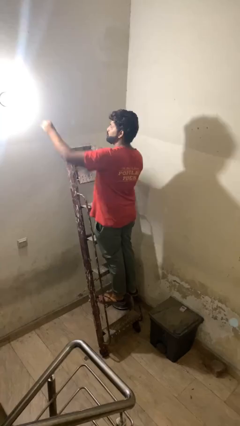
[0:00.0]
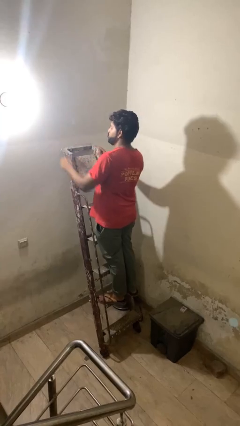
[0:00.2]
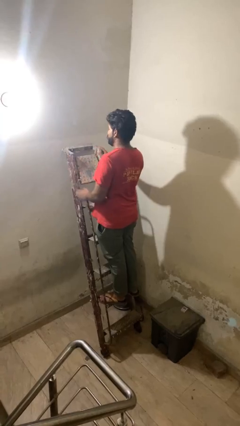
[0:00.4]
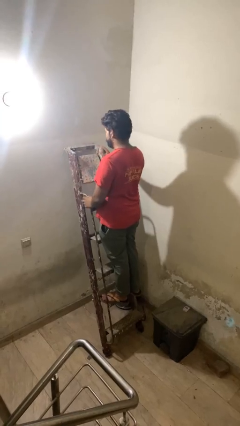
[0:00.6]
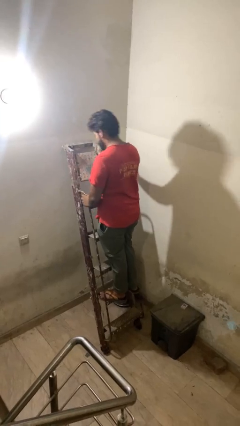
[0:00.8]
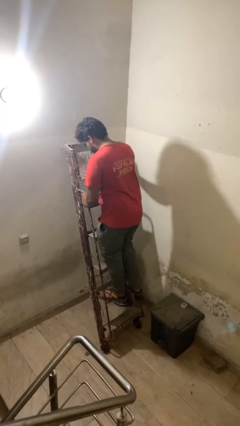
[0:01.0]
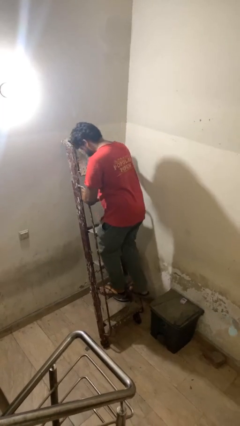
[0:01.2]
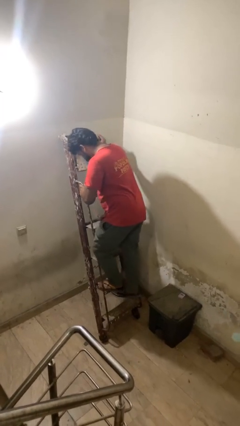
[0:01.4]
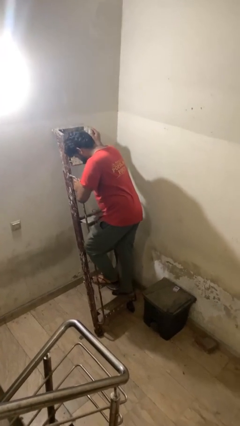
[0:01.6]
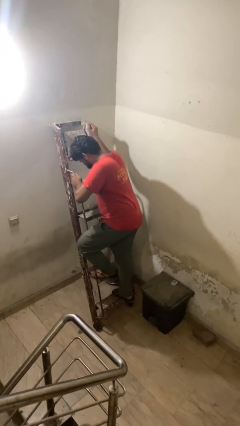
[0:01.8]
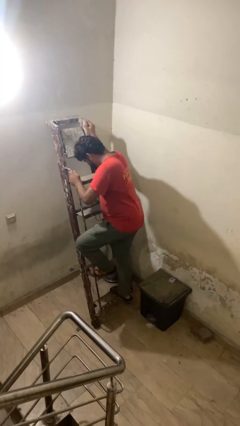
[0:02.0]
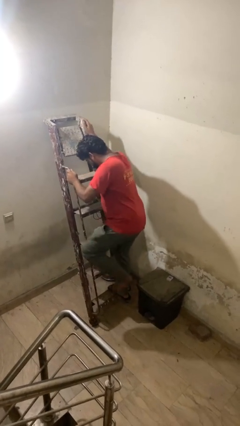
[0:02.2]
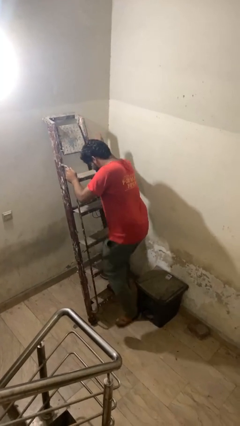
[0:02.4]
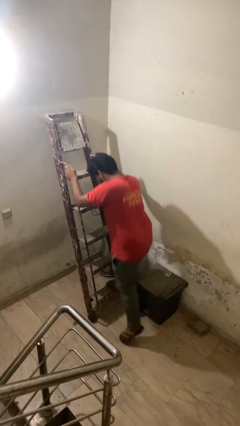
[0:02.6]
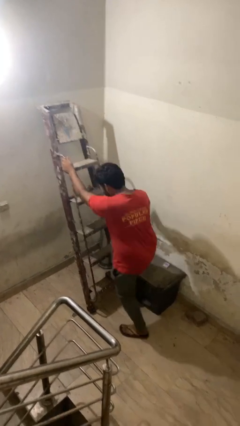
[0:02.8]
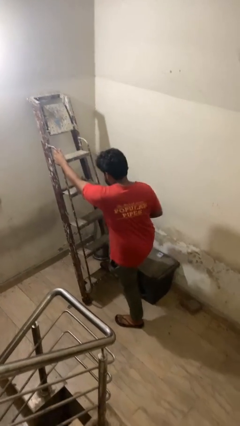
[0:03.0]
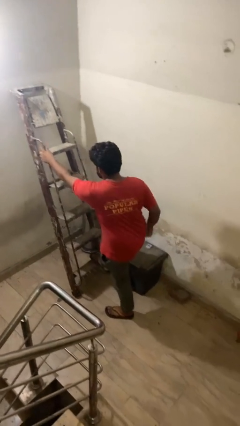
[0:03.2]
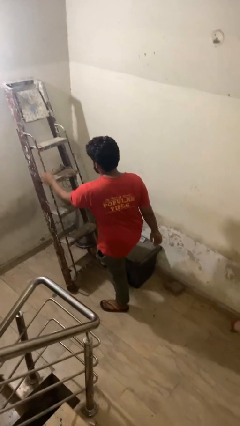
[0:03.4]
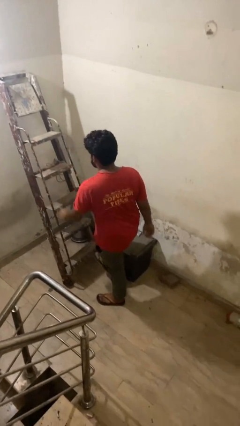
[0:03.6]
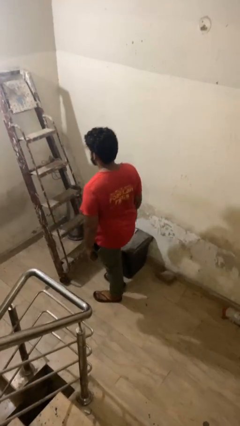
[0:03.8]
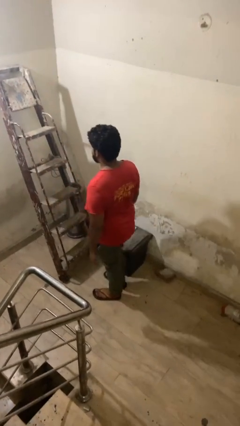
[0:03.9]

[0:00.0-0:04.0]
person climbs down ladder

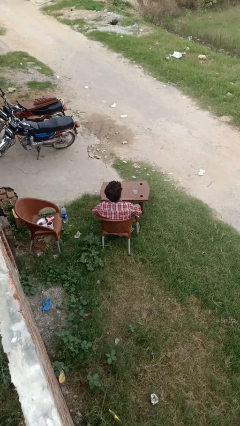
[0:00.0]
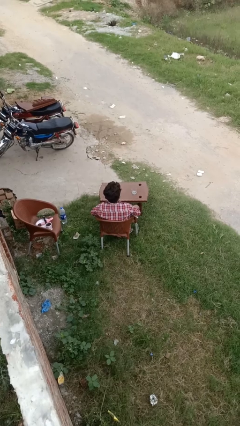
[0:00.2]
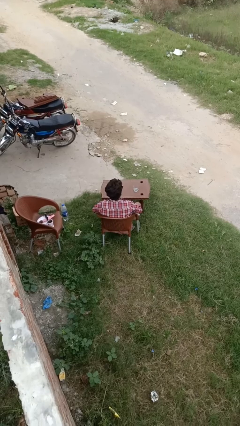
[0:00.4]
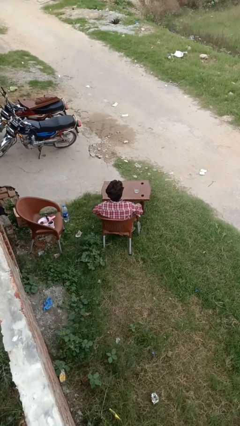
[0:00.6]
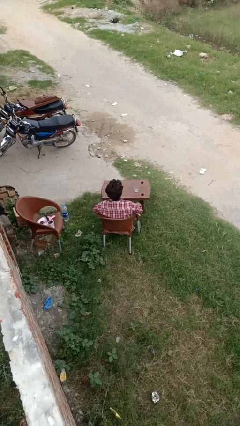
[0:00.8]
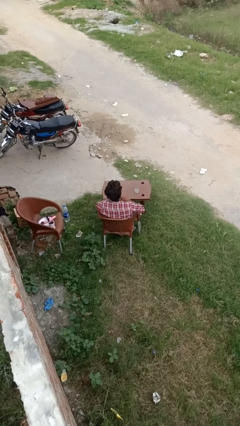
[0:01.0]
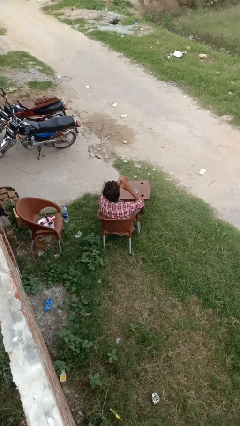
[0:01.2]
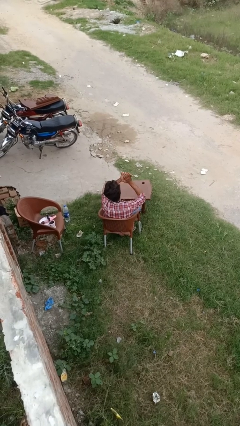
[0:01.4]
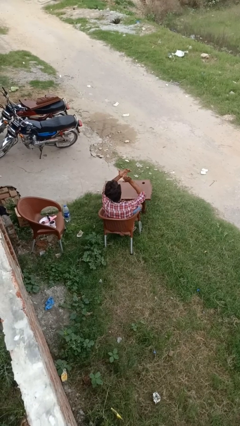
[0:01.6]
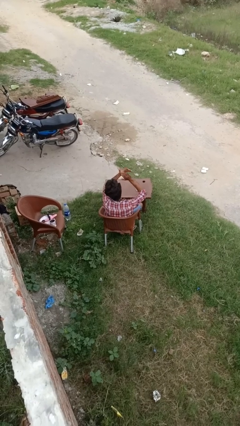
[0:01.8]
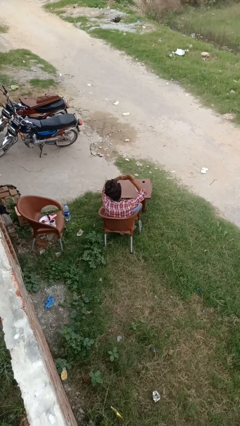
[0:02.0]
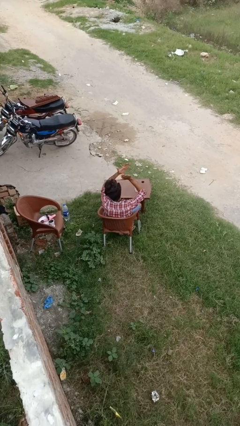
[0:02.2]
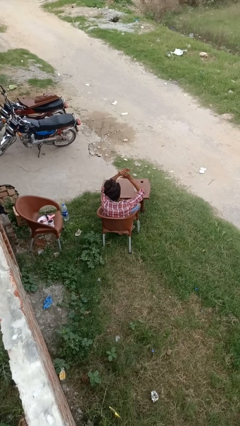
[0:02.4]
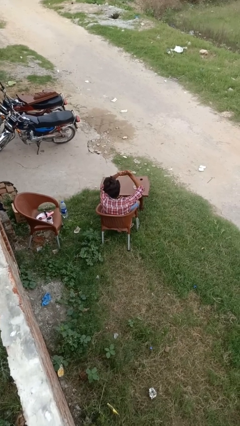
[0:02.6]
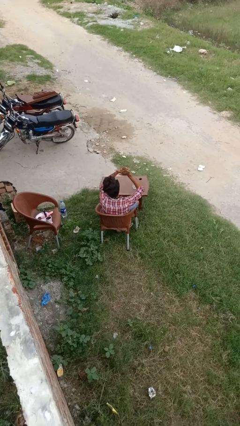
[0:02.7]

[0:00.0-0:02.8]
person claps hands

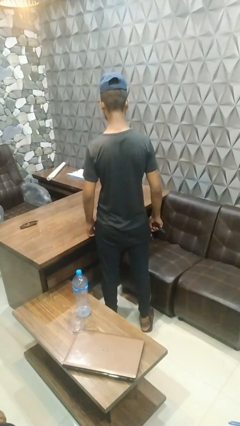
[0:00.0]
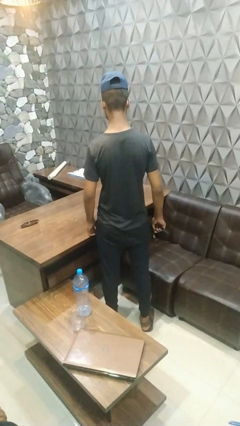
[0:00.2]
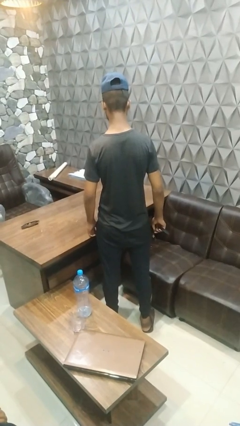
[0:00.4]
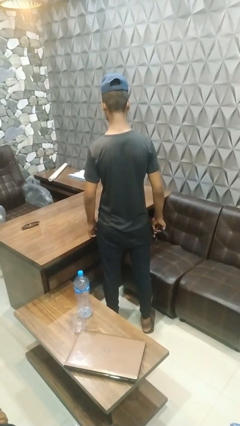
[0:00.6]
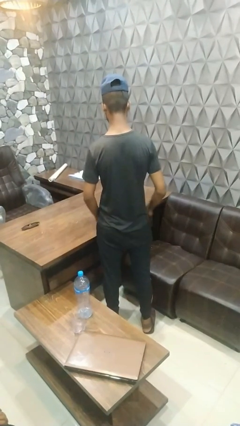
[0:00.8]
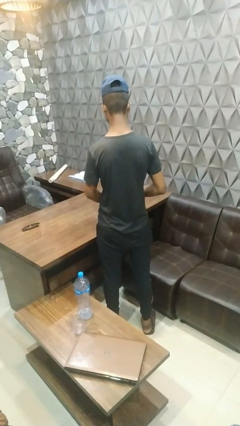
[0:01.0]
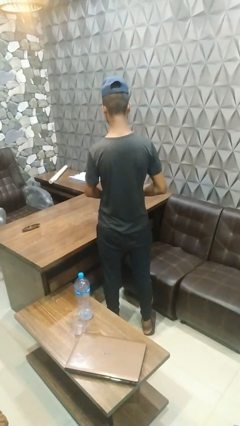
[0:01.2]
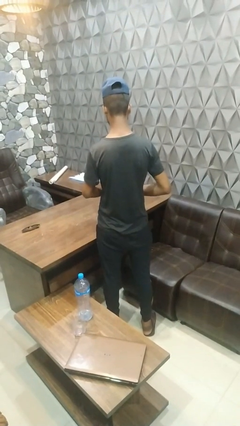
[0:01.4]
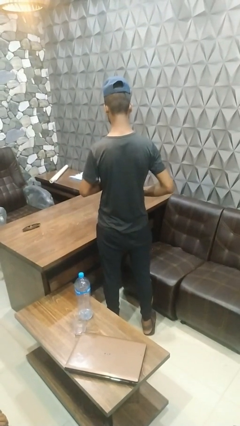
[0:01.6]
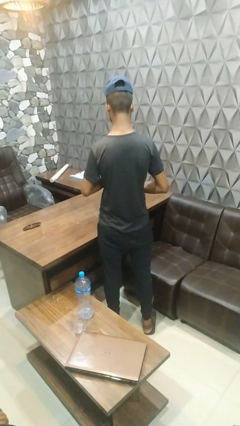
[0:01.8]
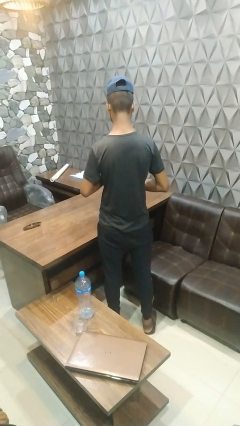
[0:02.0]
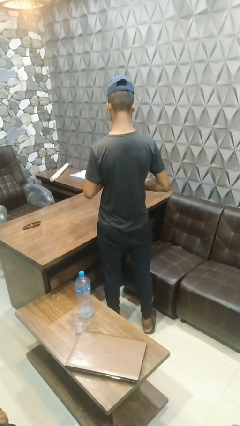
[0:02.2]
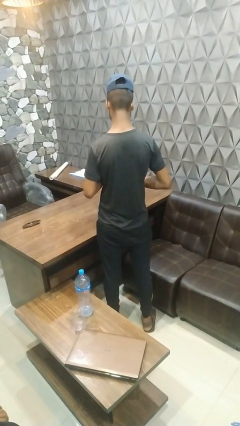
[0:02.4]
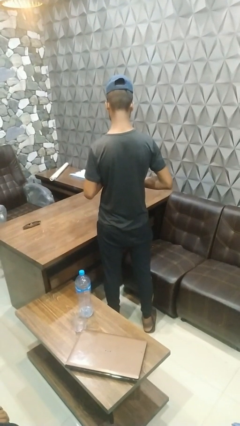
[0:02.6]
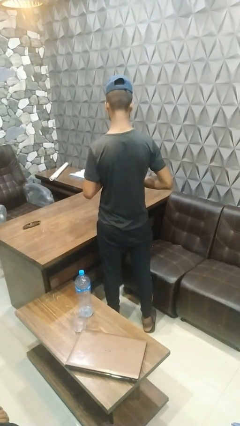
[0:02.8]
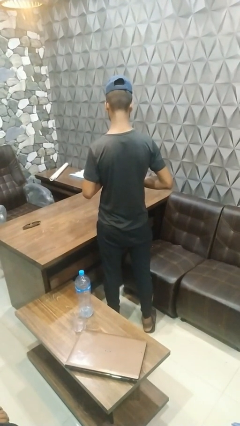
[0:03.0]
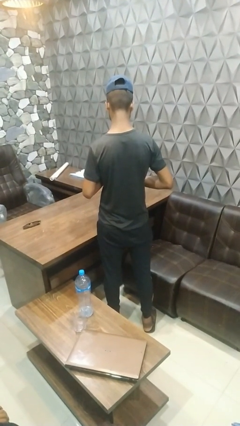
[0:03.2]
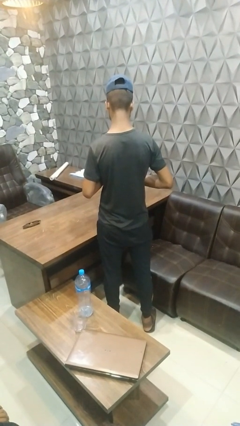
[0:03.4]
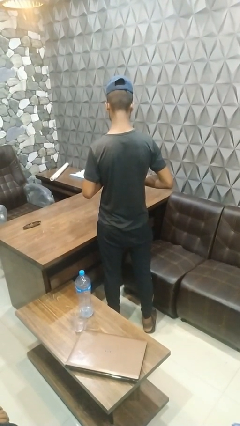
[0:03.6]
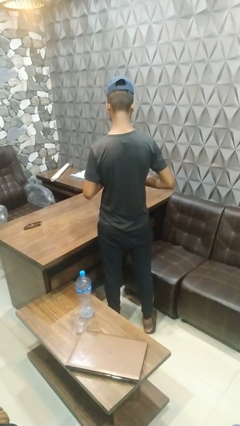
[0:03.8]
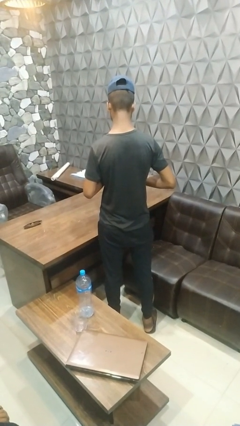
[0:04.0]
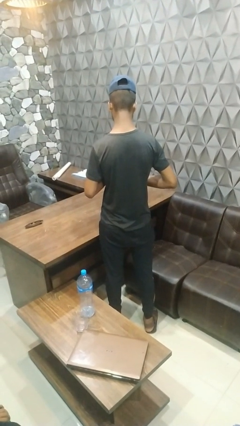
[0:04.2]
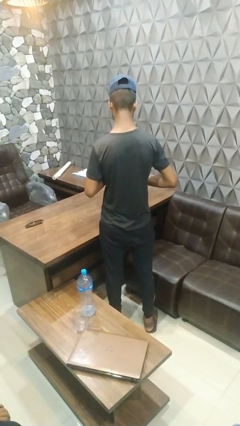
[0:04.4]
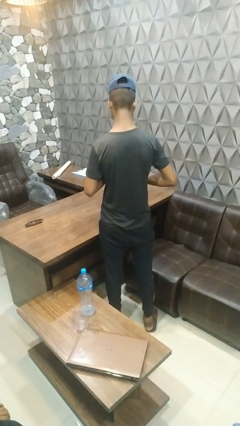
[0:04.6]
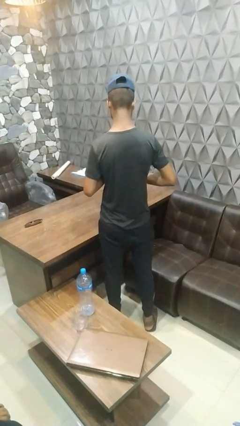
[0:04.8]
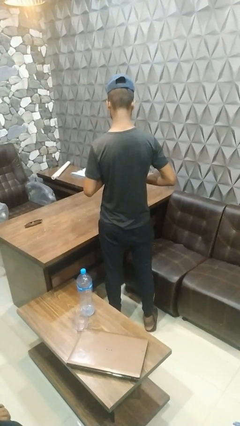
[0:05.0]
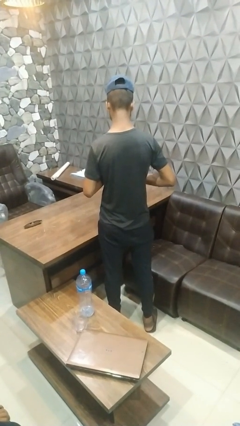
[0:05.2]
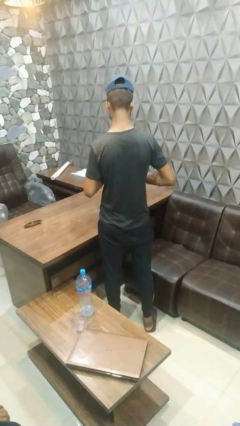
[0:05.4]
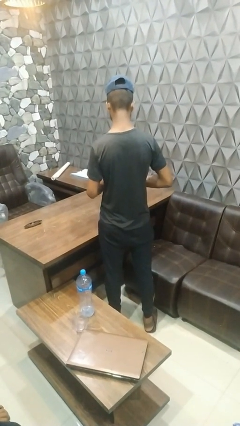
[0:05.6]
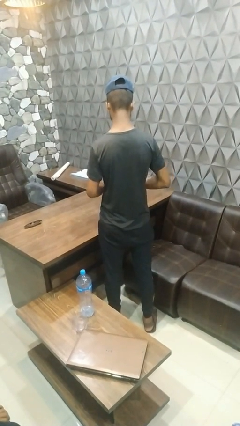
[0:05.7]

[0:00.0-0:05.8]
person puts on wristwatch

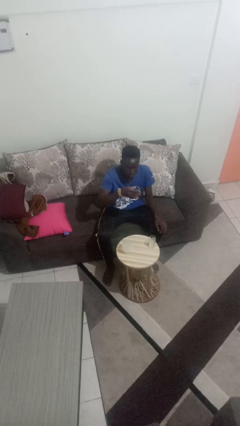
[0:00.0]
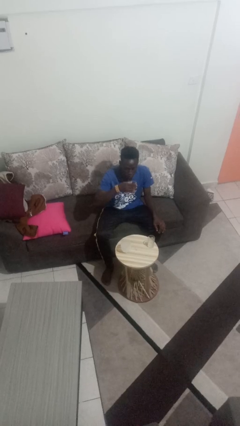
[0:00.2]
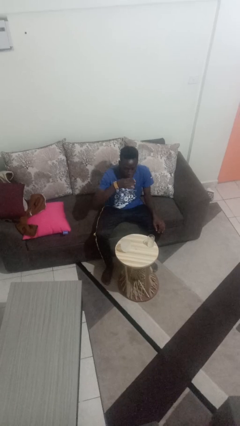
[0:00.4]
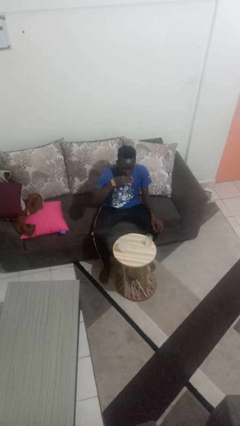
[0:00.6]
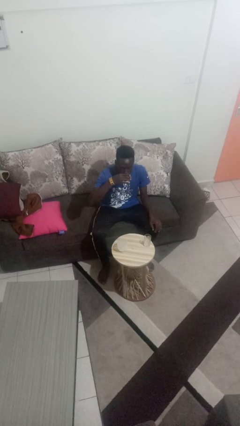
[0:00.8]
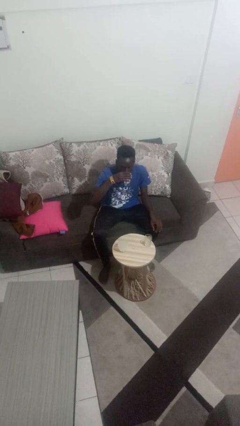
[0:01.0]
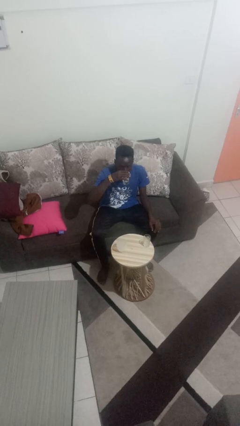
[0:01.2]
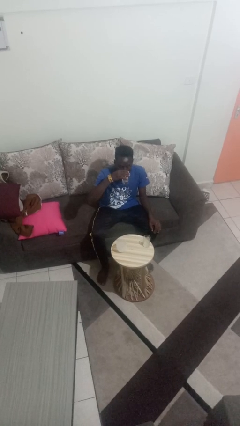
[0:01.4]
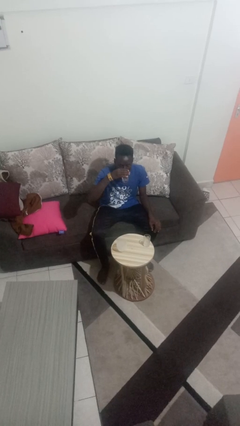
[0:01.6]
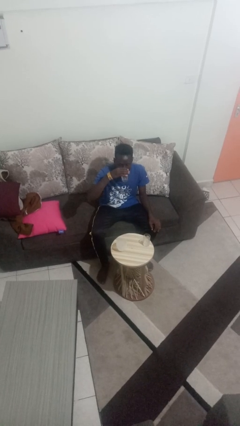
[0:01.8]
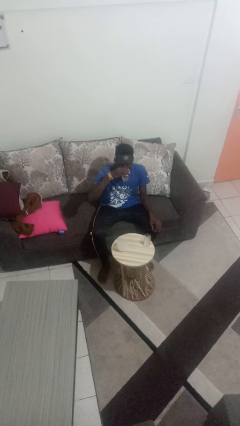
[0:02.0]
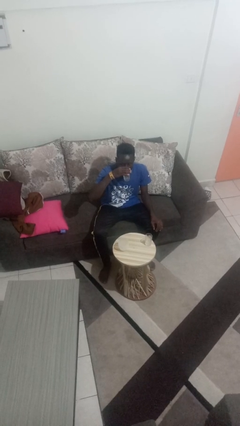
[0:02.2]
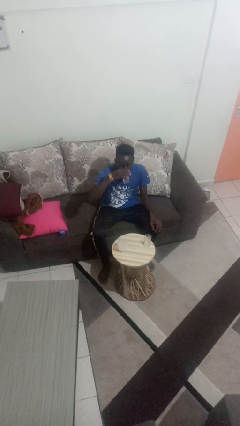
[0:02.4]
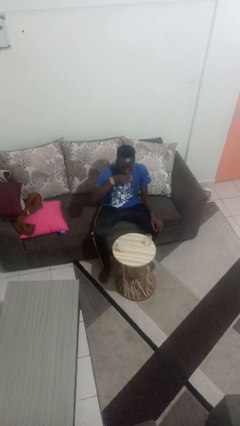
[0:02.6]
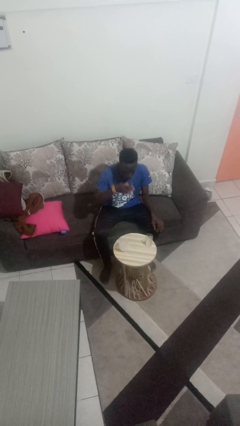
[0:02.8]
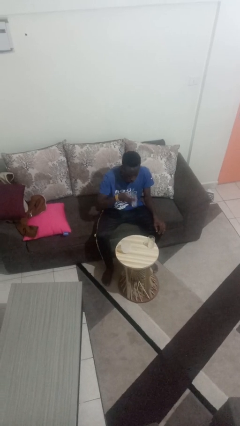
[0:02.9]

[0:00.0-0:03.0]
person drinks from shotglass

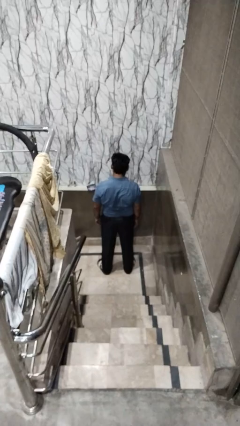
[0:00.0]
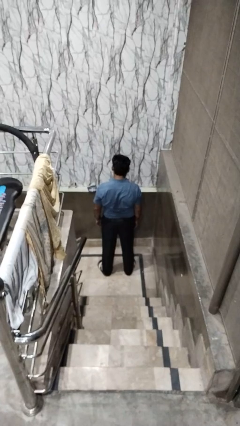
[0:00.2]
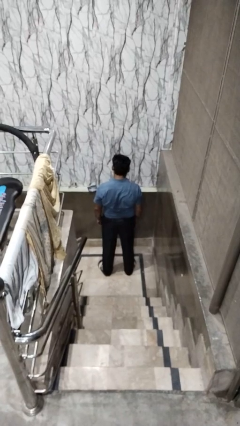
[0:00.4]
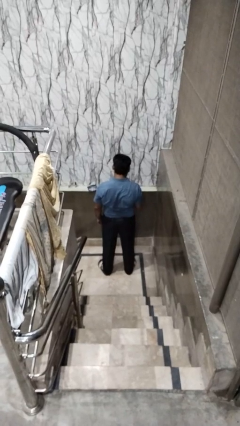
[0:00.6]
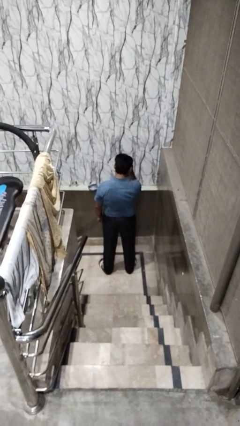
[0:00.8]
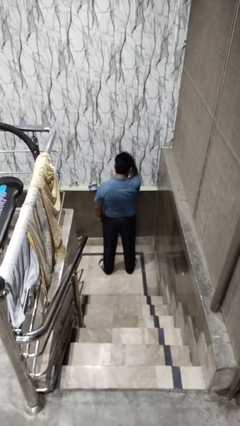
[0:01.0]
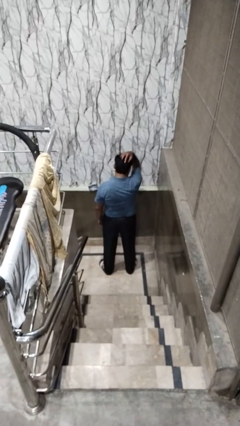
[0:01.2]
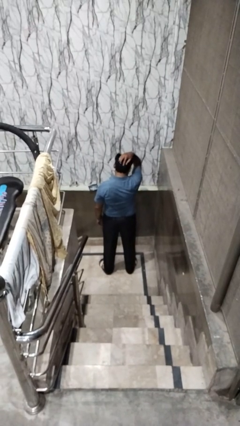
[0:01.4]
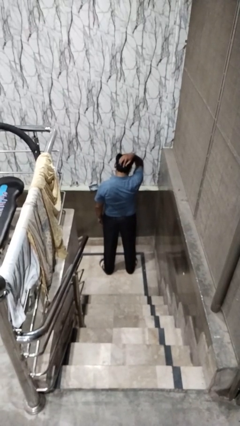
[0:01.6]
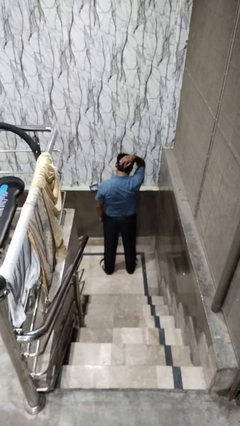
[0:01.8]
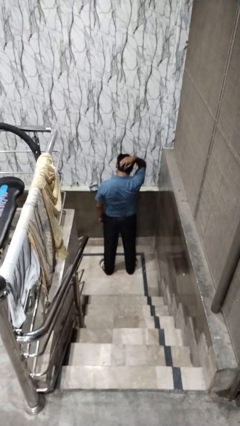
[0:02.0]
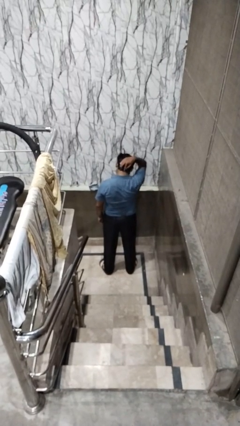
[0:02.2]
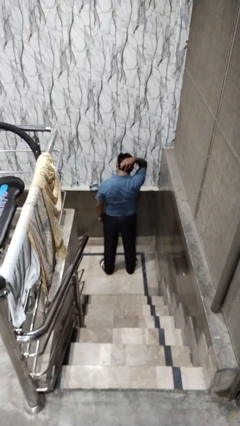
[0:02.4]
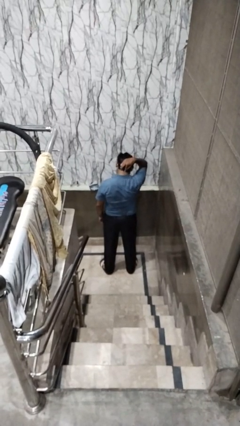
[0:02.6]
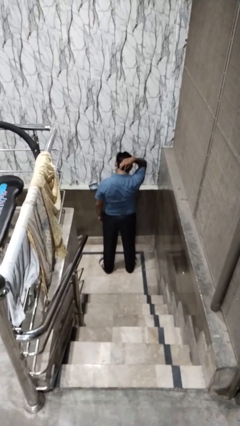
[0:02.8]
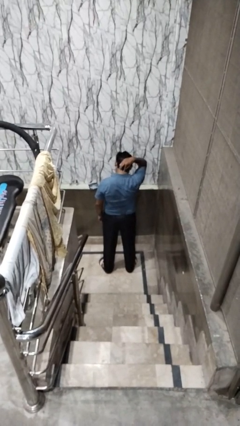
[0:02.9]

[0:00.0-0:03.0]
person strokes hair
